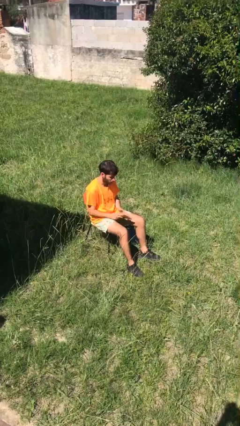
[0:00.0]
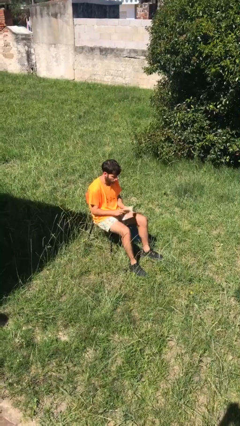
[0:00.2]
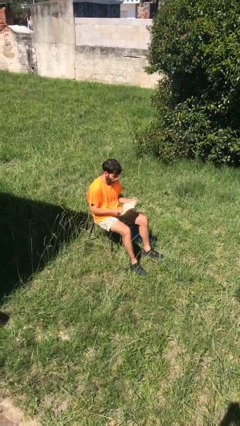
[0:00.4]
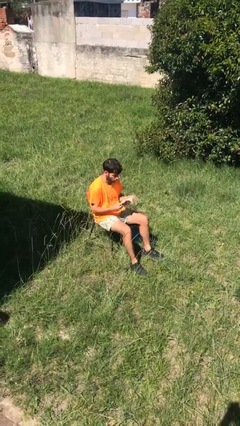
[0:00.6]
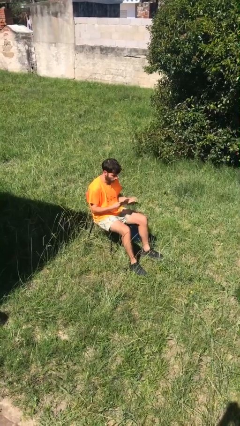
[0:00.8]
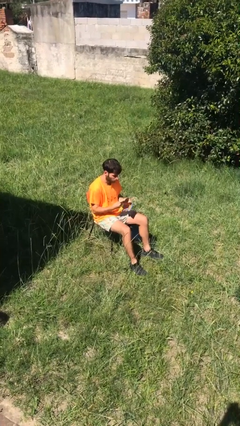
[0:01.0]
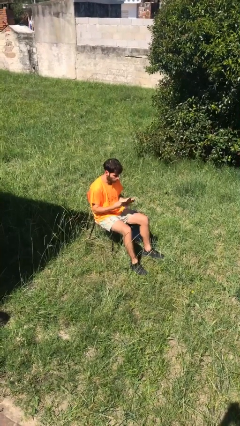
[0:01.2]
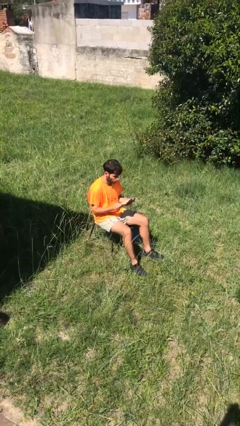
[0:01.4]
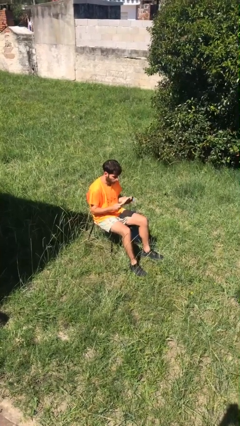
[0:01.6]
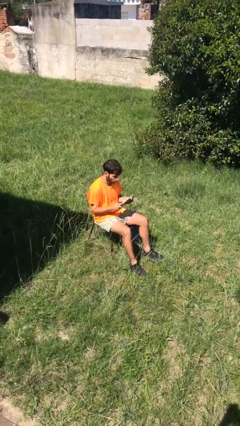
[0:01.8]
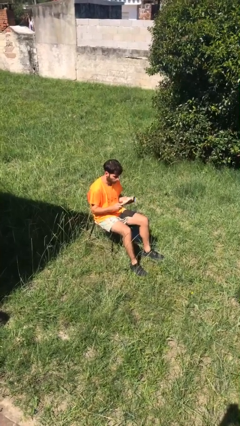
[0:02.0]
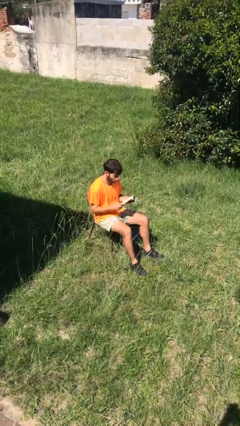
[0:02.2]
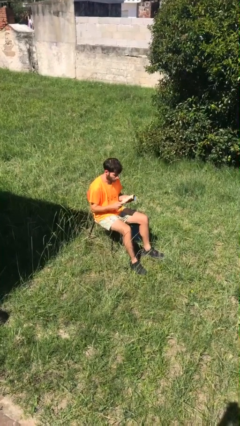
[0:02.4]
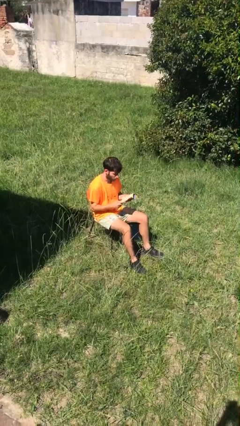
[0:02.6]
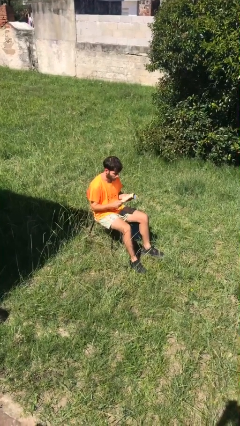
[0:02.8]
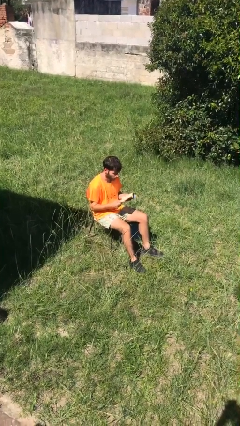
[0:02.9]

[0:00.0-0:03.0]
person reads document

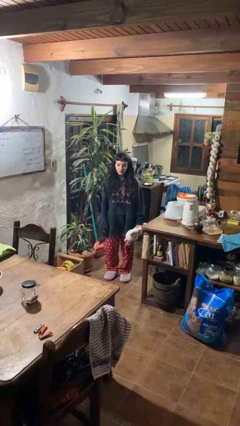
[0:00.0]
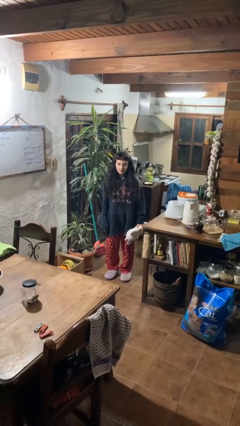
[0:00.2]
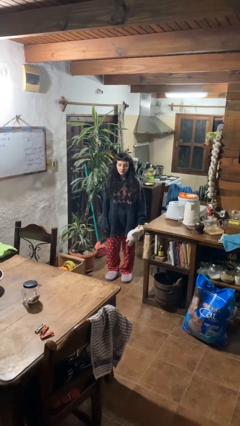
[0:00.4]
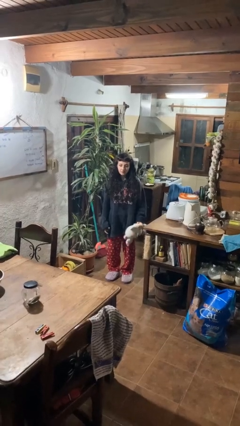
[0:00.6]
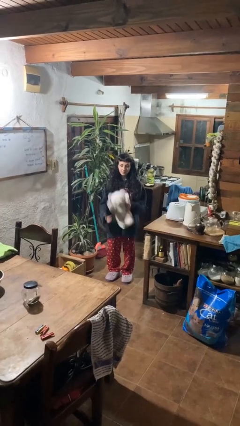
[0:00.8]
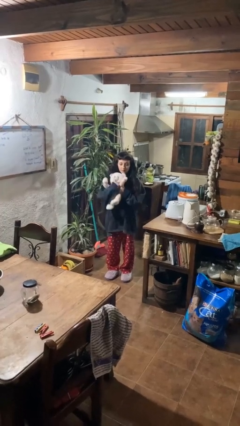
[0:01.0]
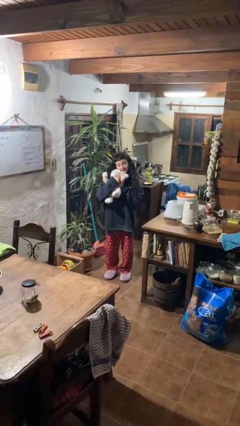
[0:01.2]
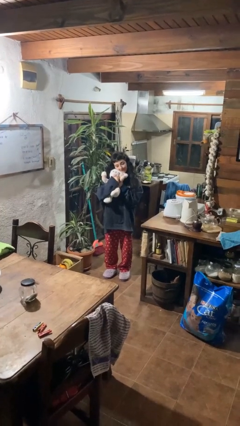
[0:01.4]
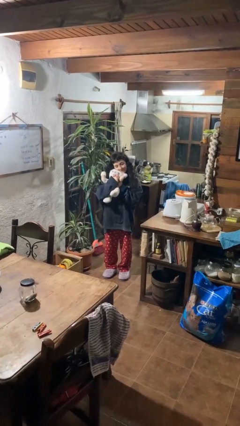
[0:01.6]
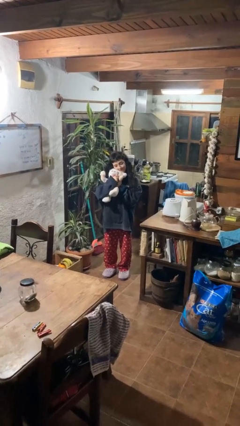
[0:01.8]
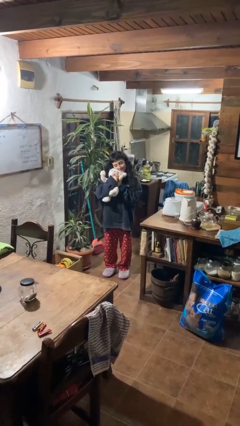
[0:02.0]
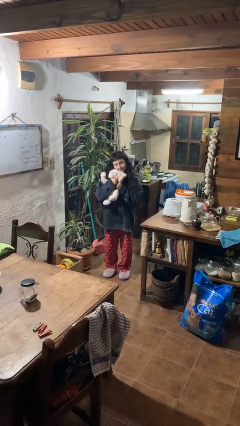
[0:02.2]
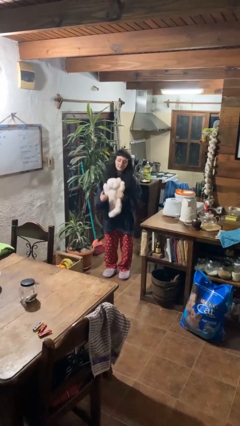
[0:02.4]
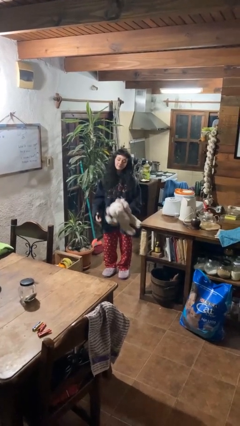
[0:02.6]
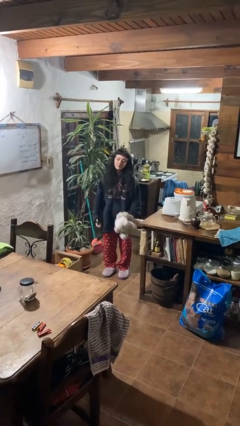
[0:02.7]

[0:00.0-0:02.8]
person hugs stuffed animal

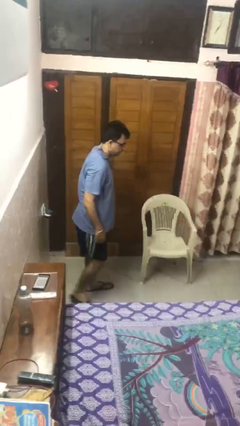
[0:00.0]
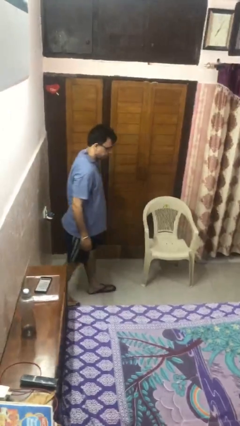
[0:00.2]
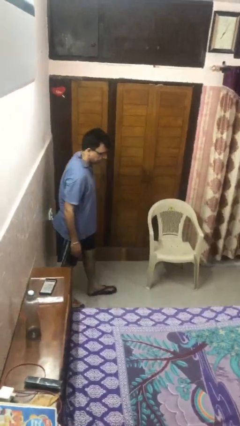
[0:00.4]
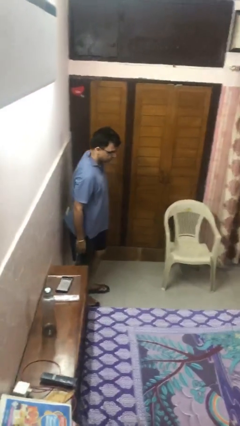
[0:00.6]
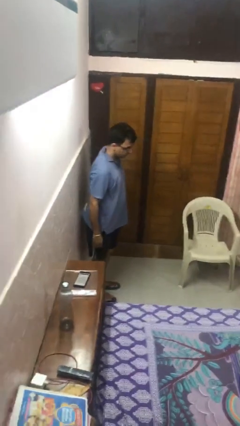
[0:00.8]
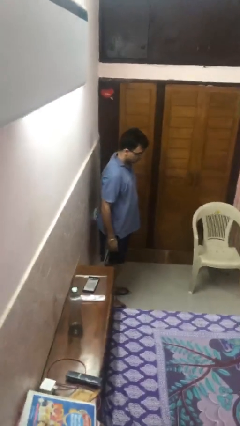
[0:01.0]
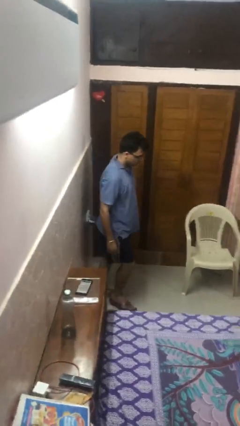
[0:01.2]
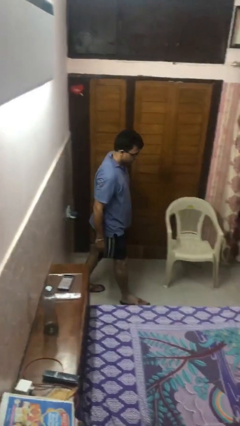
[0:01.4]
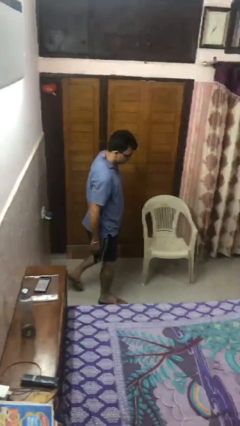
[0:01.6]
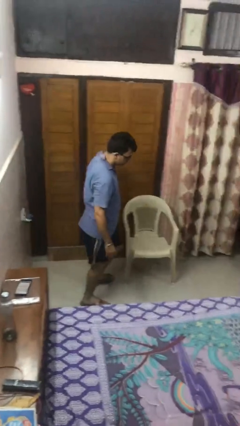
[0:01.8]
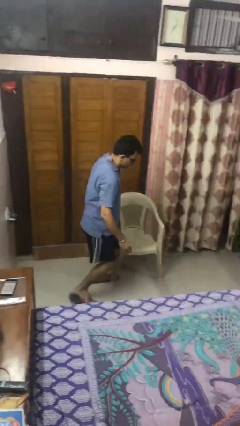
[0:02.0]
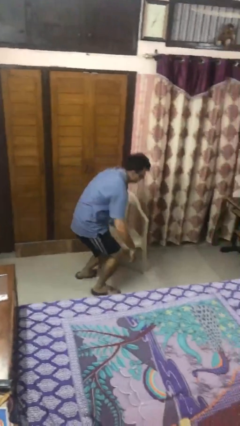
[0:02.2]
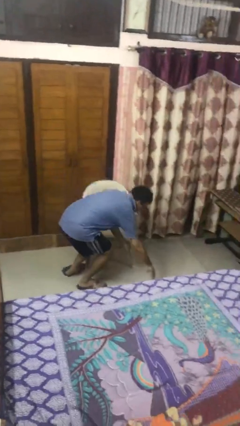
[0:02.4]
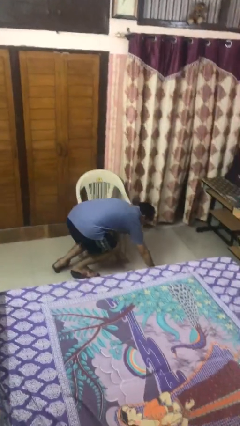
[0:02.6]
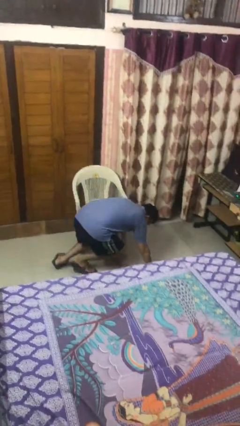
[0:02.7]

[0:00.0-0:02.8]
person trips on object on floor

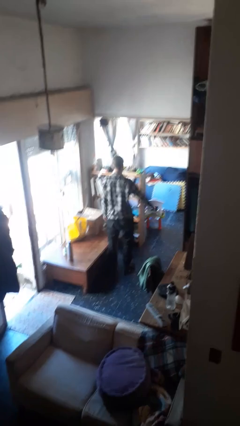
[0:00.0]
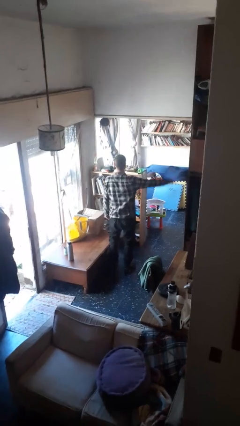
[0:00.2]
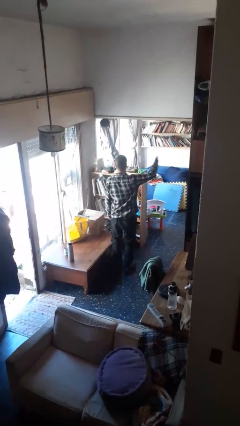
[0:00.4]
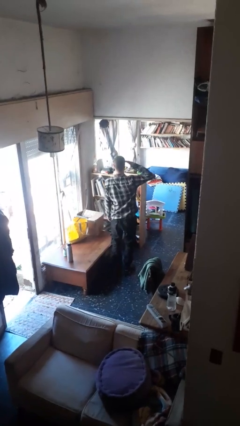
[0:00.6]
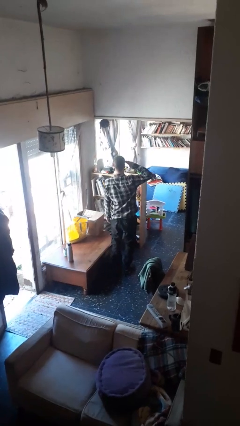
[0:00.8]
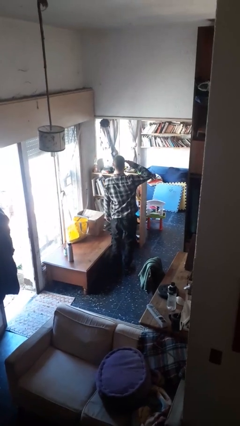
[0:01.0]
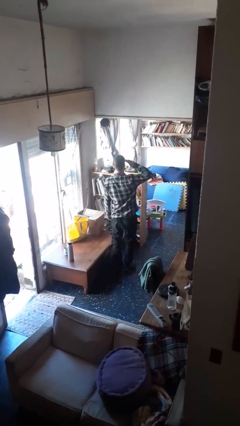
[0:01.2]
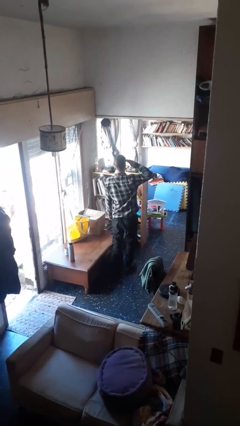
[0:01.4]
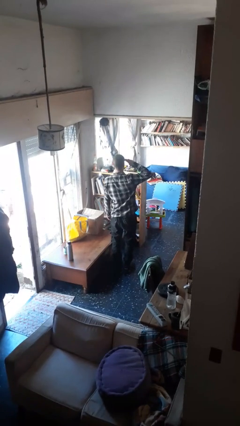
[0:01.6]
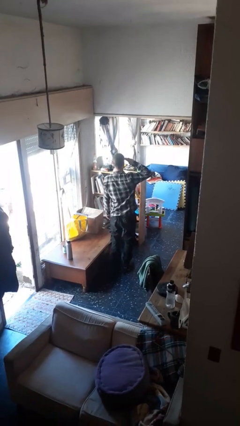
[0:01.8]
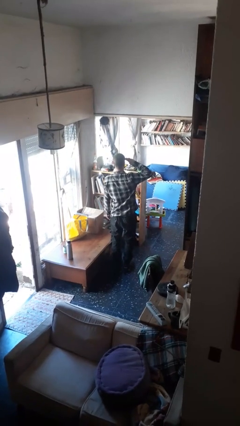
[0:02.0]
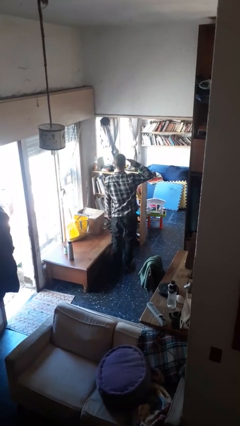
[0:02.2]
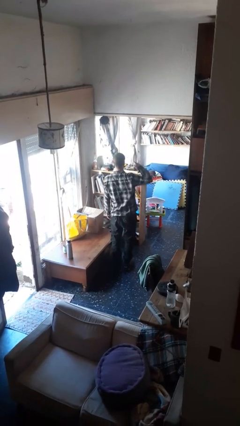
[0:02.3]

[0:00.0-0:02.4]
person salutes

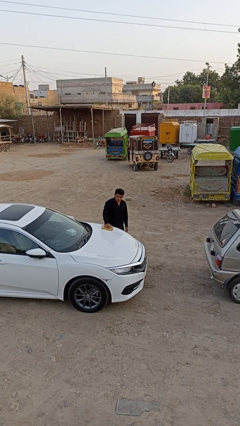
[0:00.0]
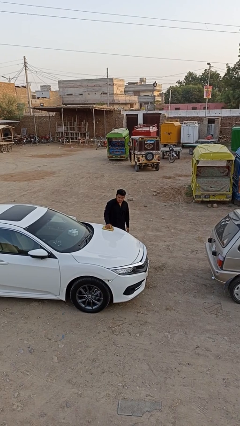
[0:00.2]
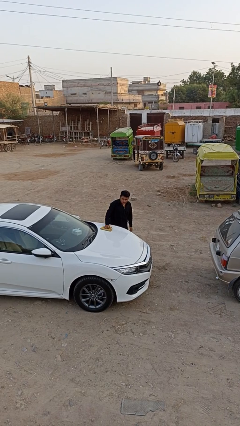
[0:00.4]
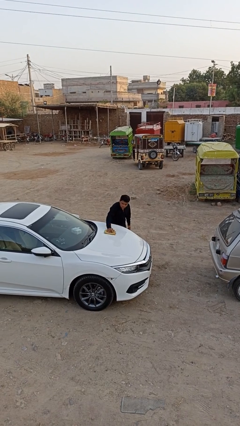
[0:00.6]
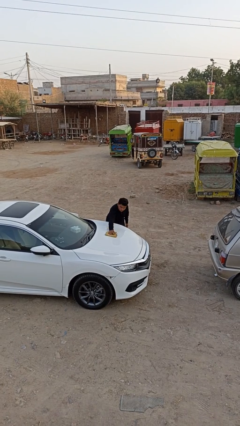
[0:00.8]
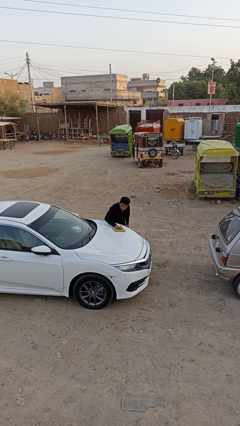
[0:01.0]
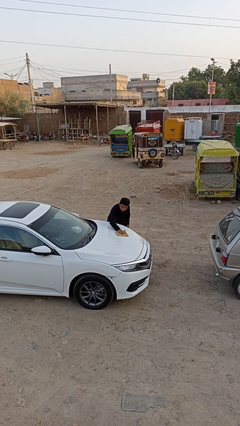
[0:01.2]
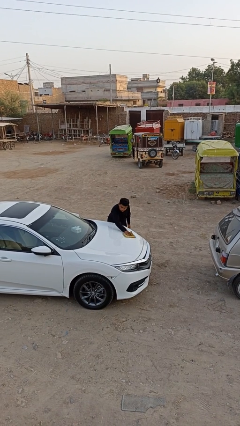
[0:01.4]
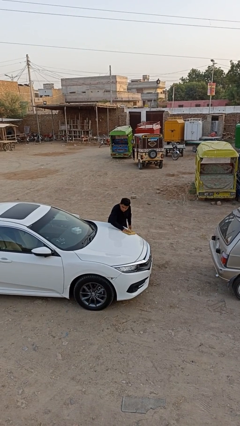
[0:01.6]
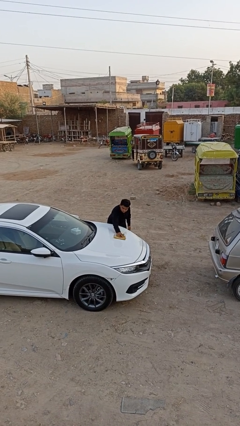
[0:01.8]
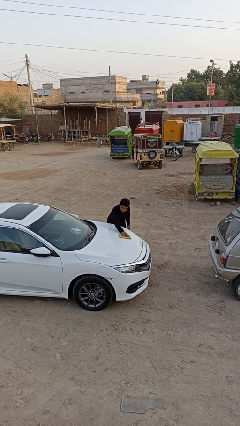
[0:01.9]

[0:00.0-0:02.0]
person polishes car with rag

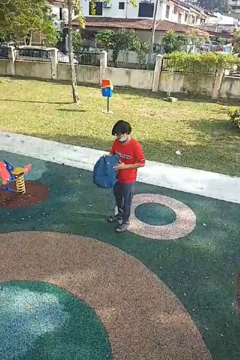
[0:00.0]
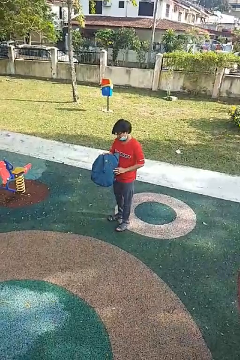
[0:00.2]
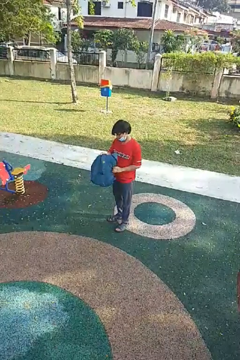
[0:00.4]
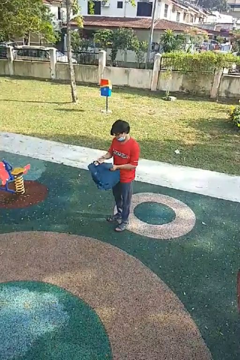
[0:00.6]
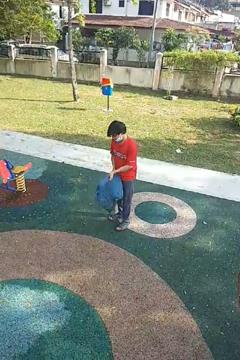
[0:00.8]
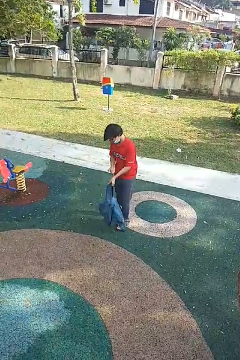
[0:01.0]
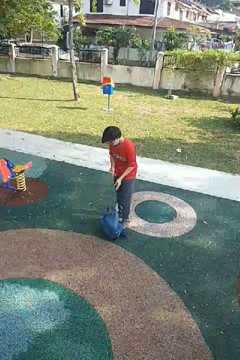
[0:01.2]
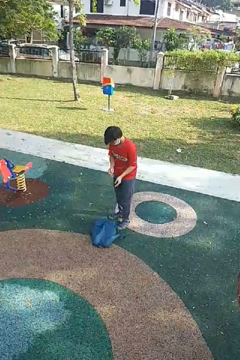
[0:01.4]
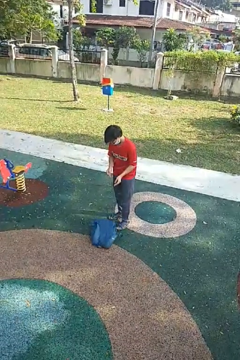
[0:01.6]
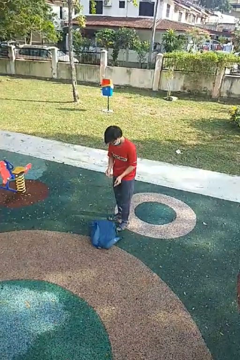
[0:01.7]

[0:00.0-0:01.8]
person drops object

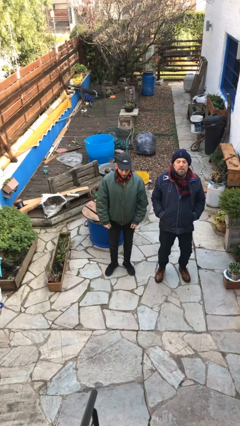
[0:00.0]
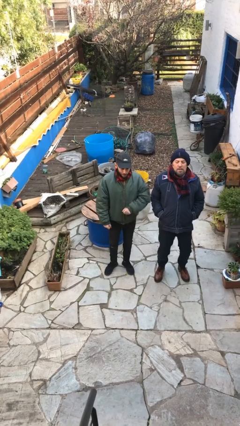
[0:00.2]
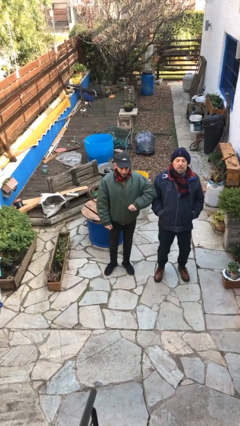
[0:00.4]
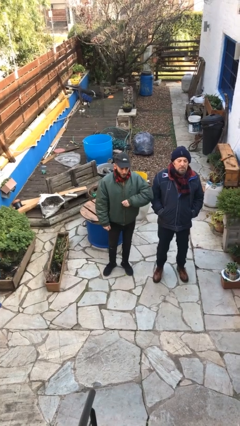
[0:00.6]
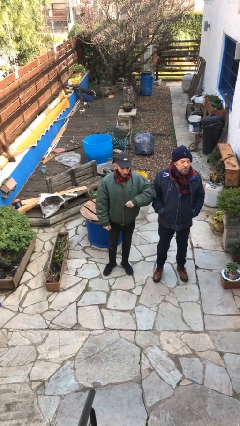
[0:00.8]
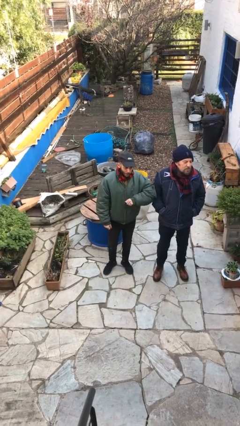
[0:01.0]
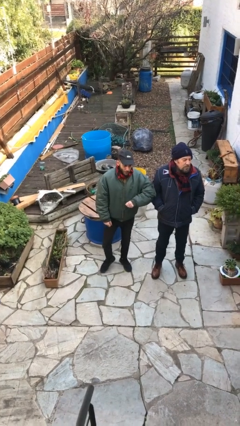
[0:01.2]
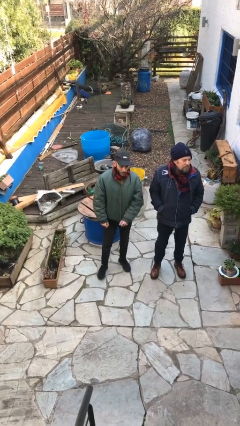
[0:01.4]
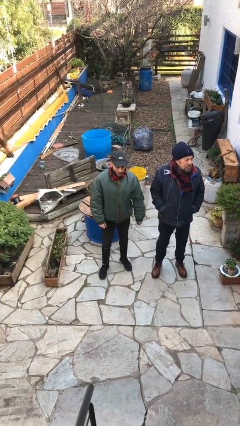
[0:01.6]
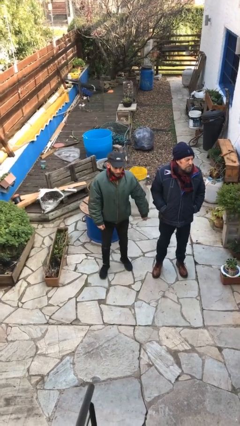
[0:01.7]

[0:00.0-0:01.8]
person nudges person with elbow

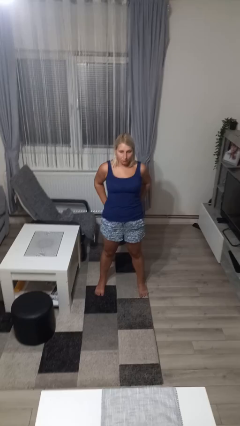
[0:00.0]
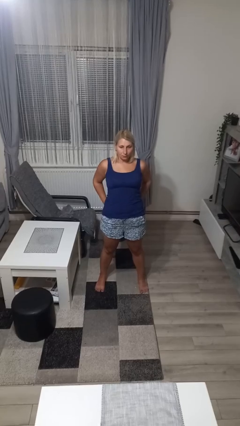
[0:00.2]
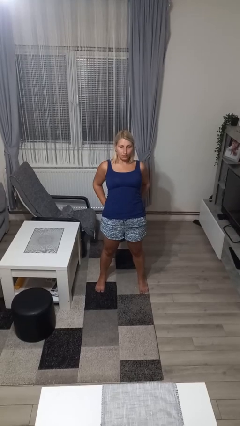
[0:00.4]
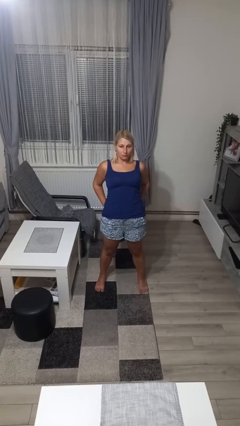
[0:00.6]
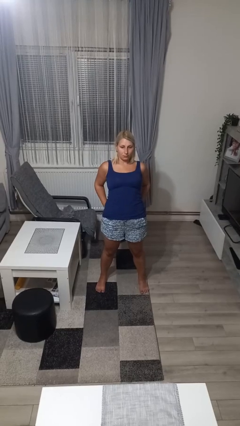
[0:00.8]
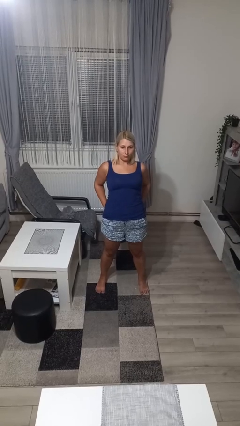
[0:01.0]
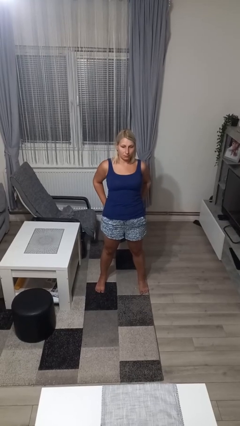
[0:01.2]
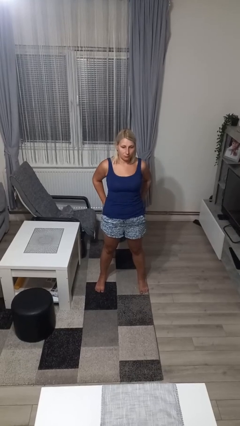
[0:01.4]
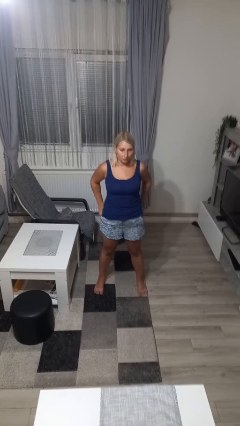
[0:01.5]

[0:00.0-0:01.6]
person stretches back
